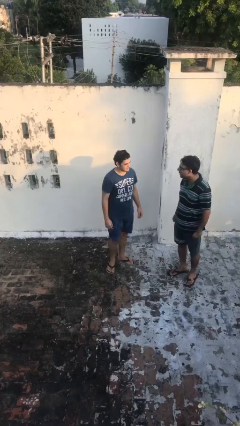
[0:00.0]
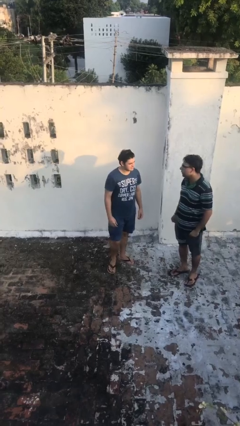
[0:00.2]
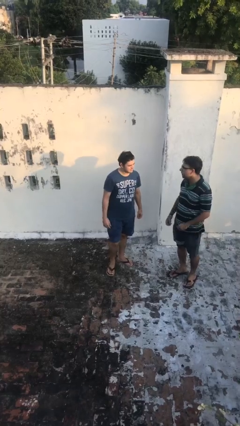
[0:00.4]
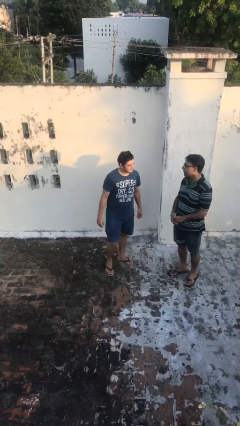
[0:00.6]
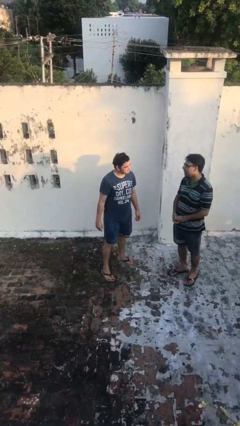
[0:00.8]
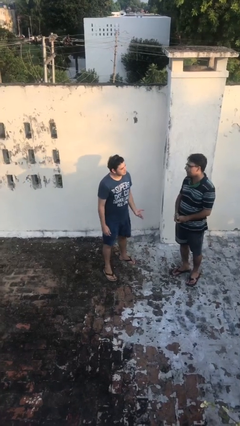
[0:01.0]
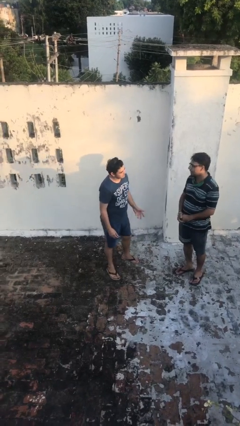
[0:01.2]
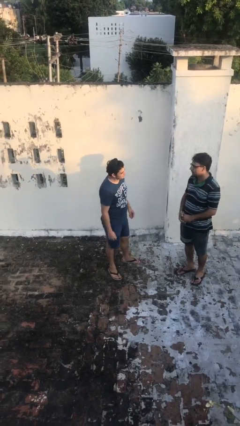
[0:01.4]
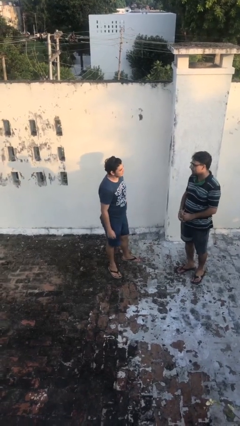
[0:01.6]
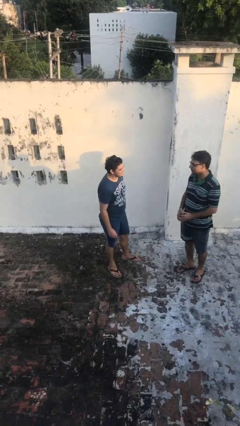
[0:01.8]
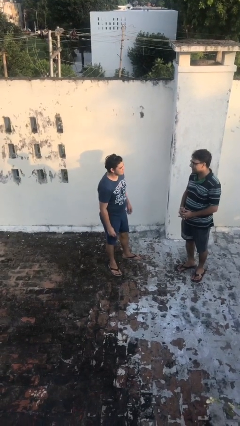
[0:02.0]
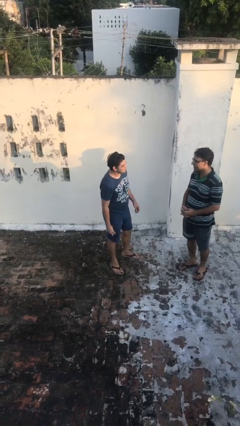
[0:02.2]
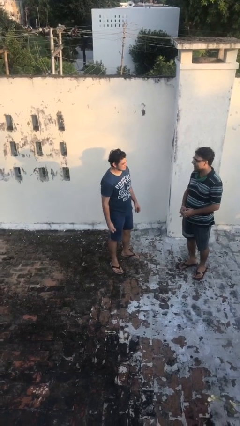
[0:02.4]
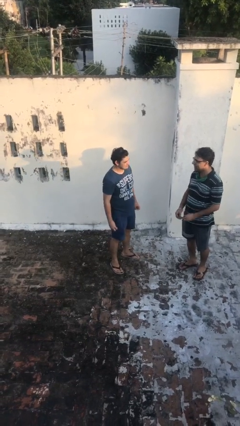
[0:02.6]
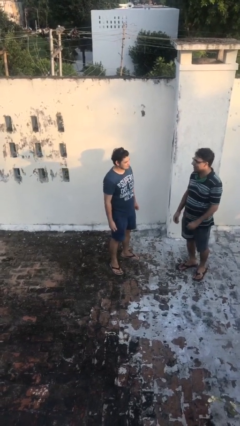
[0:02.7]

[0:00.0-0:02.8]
person talks to person

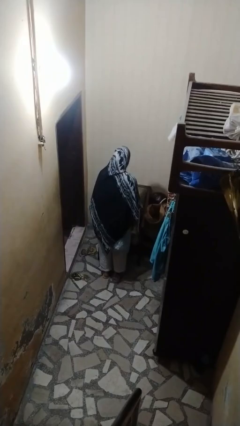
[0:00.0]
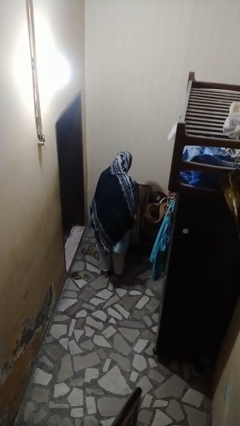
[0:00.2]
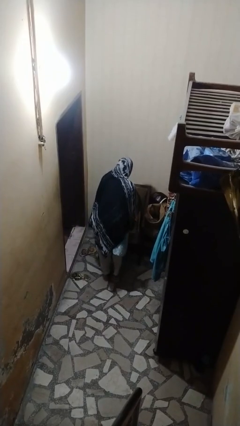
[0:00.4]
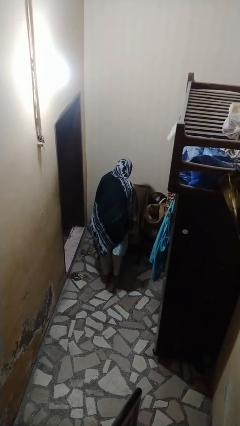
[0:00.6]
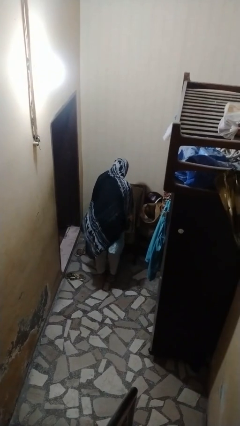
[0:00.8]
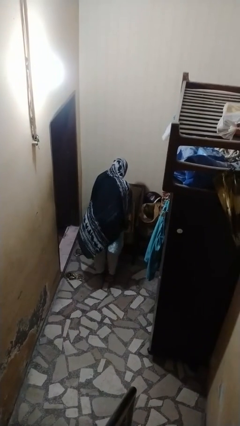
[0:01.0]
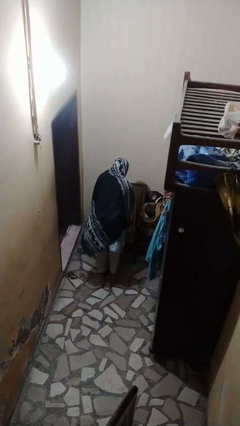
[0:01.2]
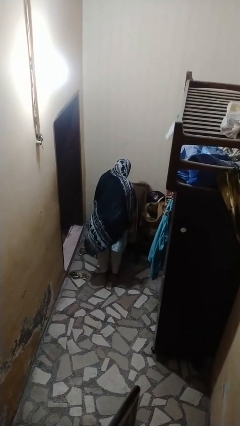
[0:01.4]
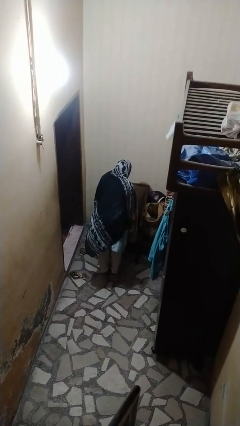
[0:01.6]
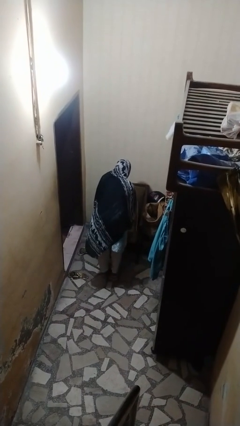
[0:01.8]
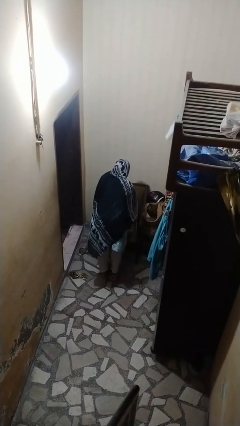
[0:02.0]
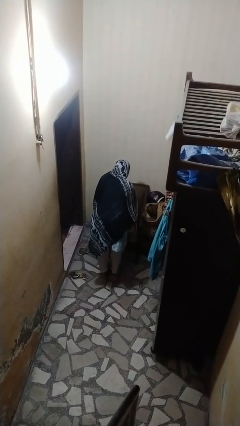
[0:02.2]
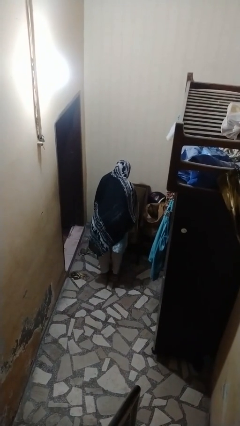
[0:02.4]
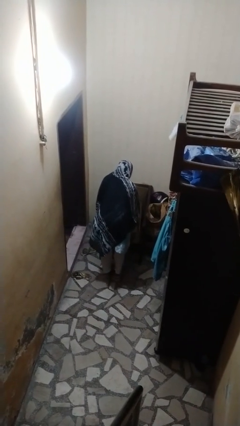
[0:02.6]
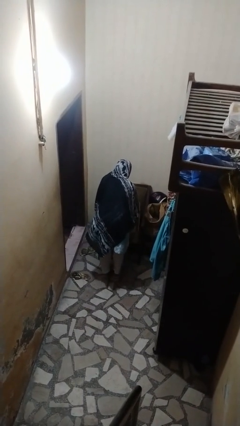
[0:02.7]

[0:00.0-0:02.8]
person searches in box

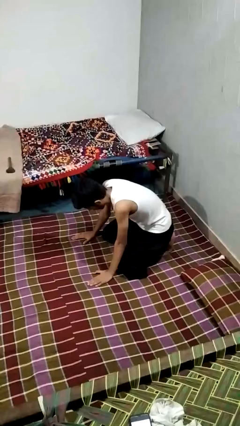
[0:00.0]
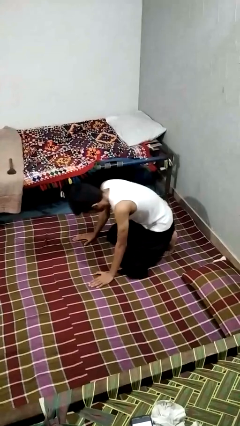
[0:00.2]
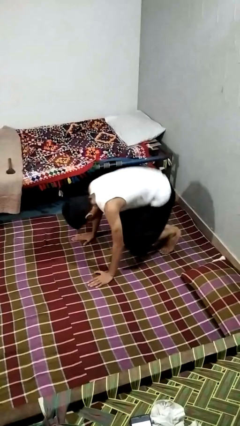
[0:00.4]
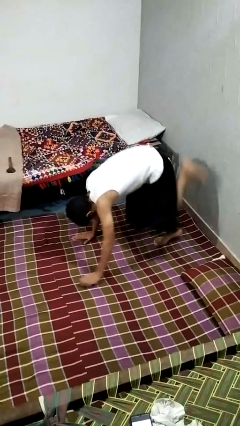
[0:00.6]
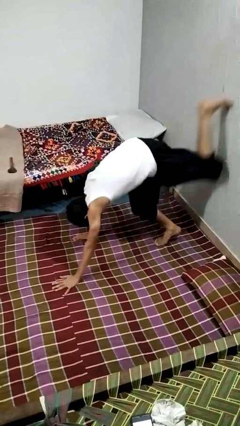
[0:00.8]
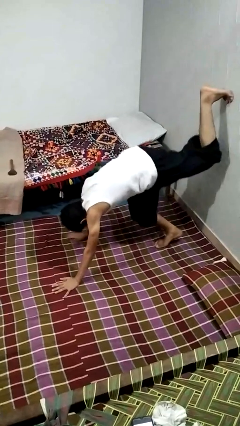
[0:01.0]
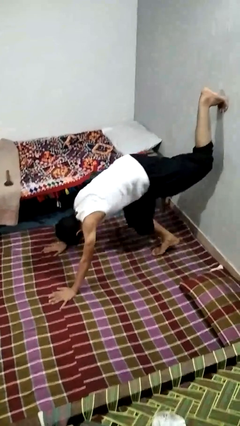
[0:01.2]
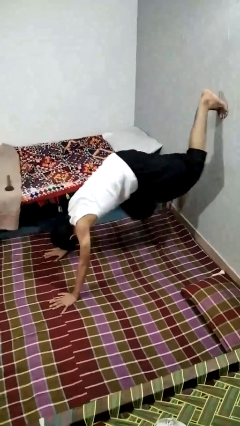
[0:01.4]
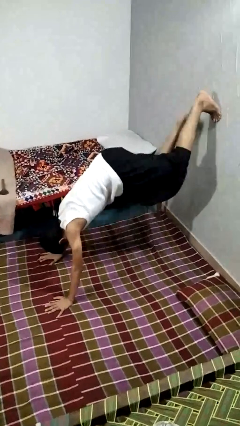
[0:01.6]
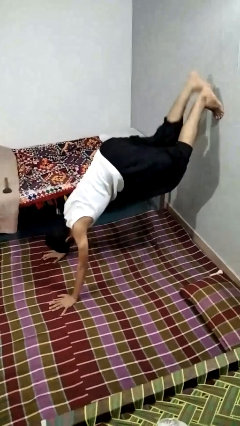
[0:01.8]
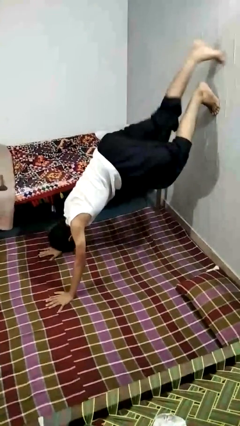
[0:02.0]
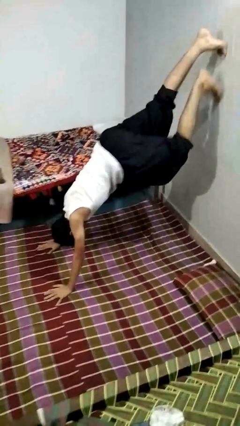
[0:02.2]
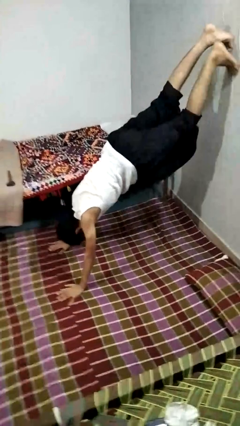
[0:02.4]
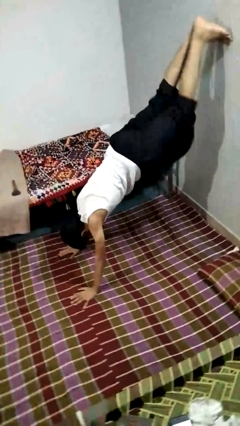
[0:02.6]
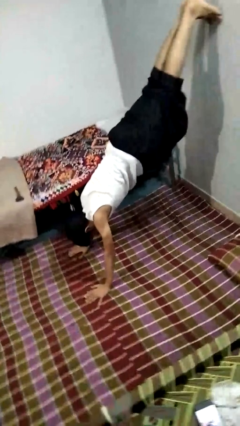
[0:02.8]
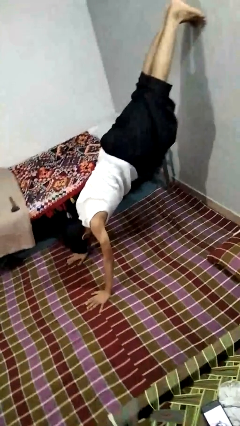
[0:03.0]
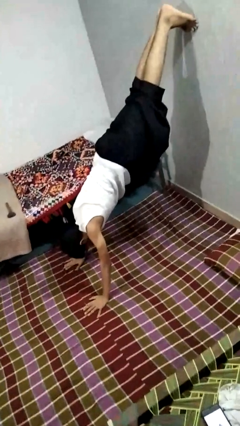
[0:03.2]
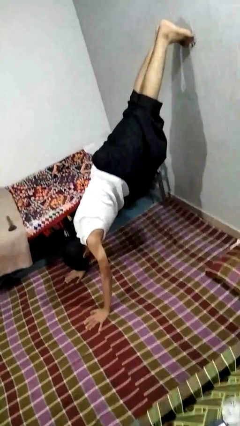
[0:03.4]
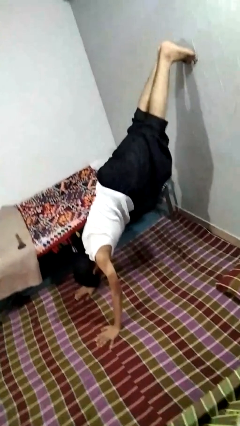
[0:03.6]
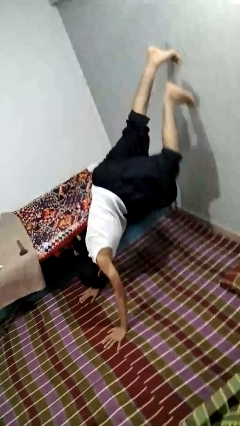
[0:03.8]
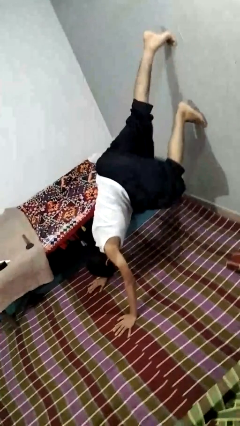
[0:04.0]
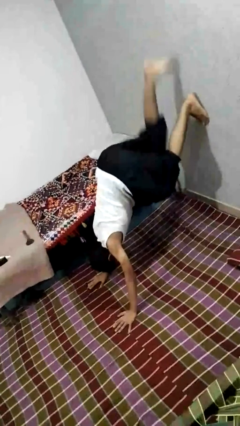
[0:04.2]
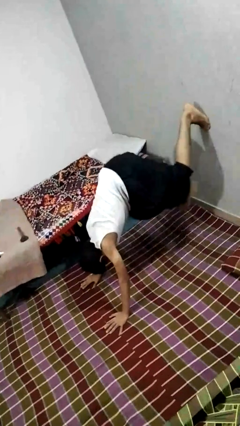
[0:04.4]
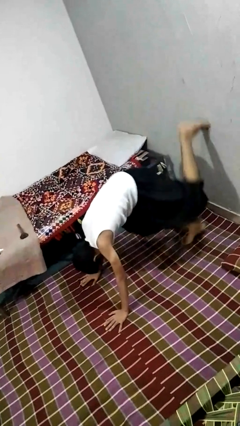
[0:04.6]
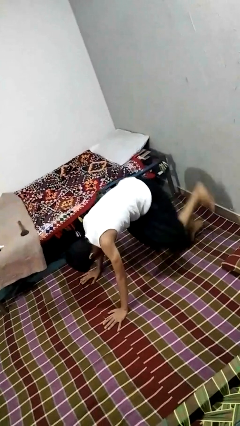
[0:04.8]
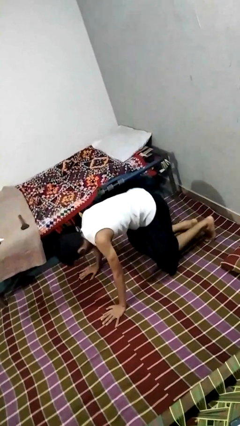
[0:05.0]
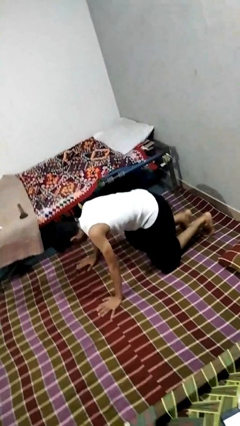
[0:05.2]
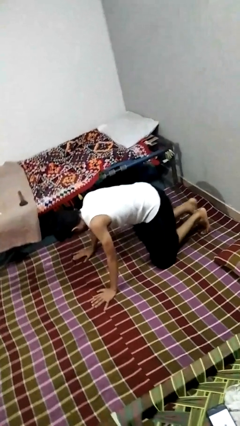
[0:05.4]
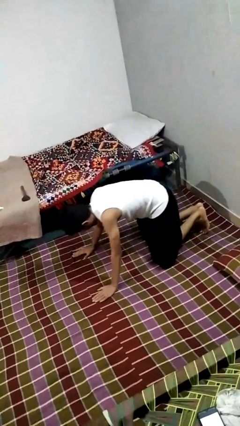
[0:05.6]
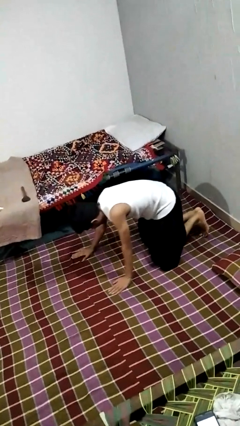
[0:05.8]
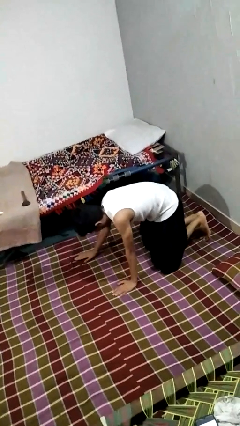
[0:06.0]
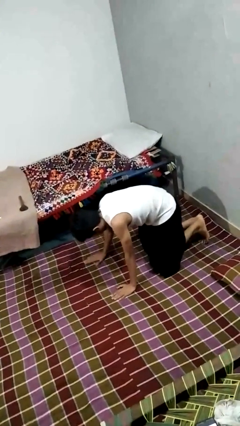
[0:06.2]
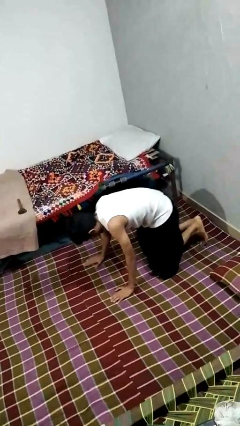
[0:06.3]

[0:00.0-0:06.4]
person handstand

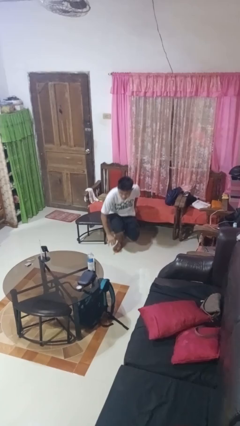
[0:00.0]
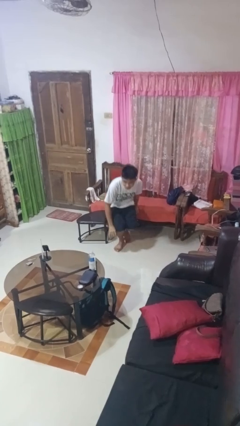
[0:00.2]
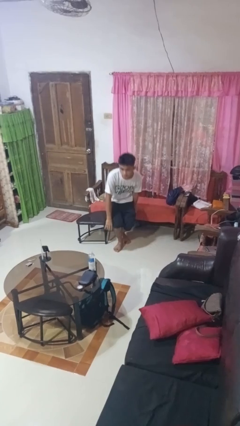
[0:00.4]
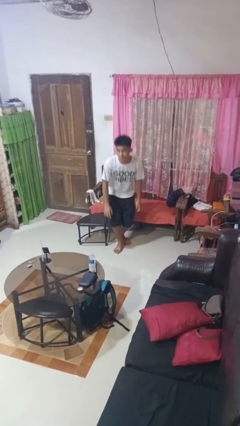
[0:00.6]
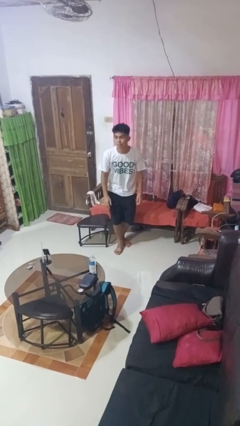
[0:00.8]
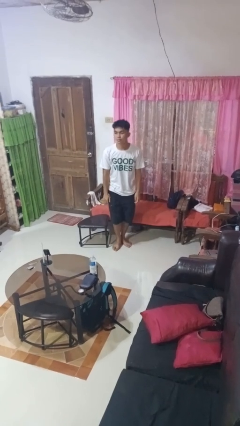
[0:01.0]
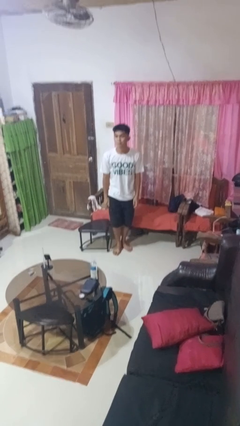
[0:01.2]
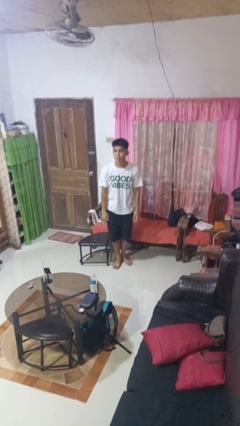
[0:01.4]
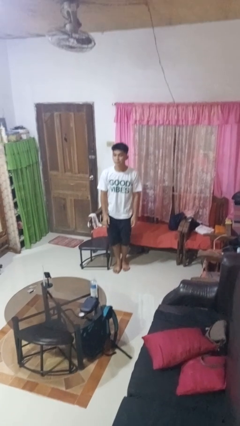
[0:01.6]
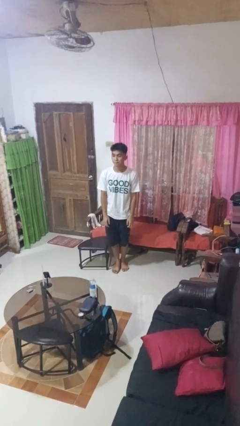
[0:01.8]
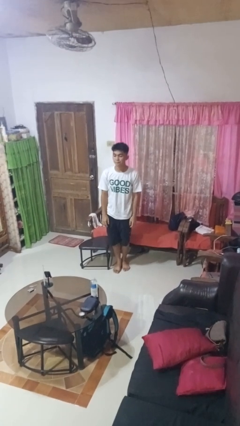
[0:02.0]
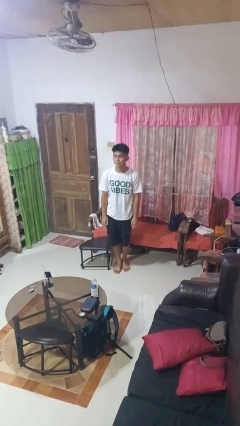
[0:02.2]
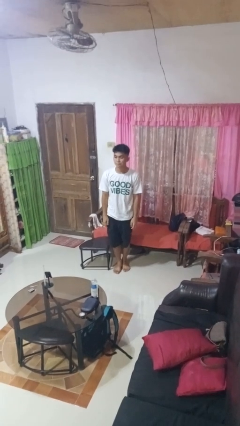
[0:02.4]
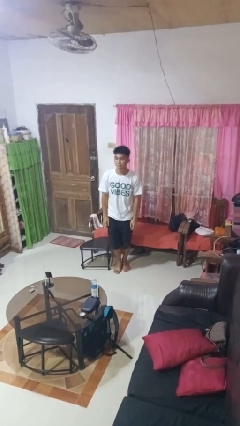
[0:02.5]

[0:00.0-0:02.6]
person stands up from floor

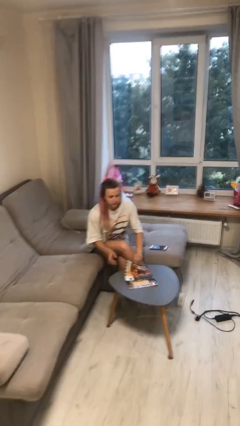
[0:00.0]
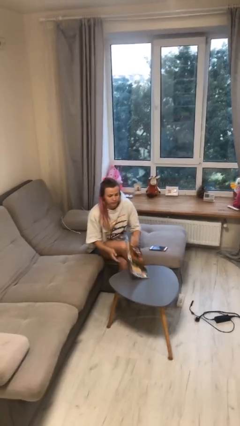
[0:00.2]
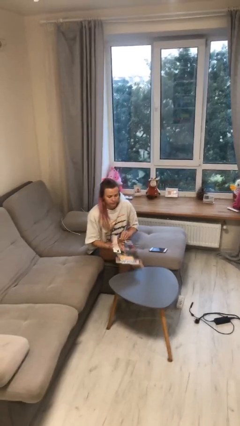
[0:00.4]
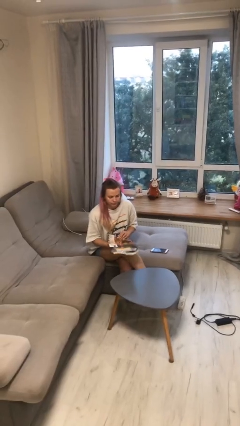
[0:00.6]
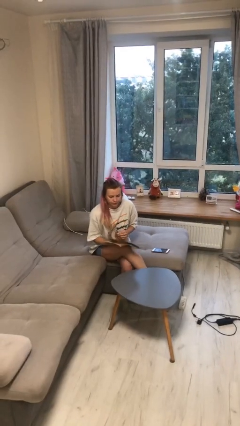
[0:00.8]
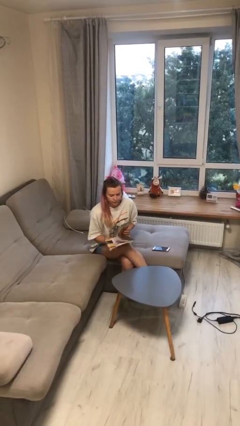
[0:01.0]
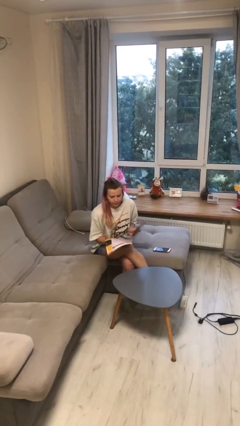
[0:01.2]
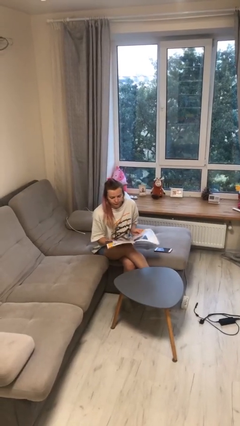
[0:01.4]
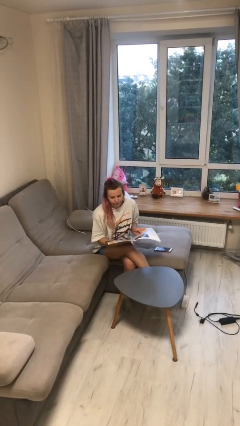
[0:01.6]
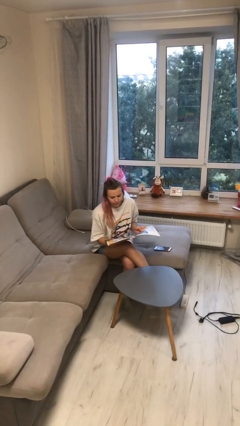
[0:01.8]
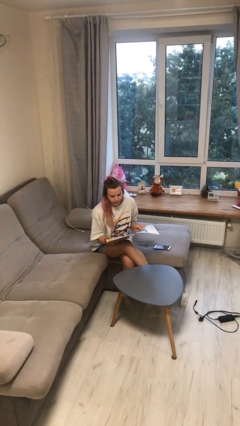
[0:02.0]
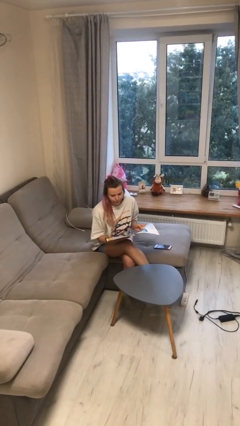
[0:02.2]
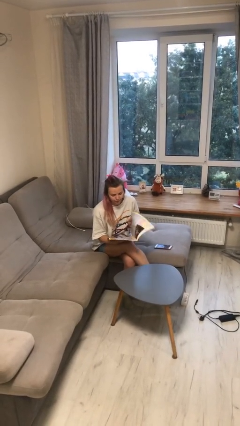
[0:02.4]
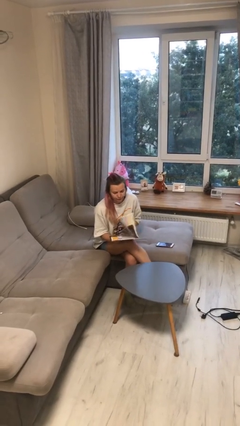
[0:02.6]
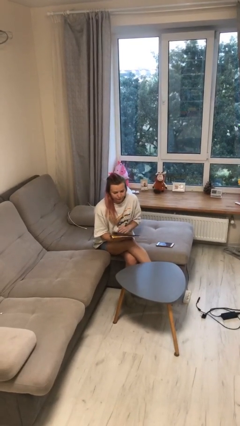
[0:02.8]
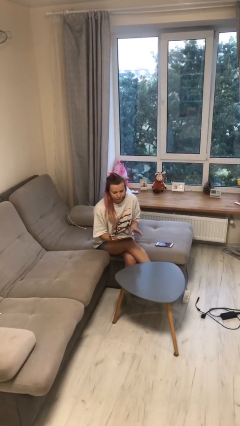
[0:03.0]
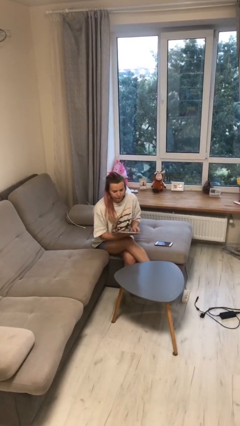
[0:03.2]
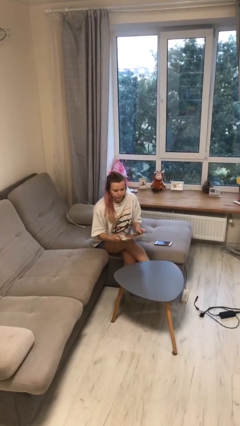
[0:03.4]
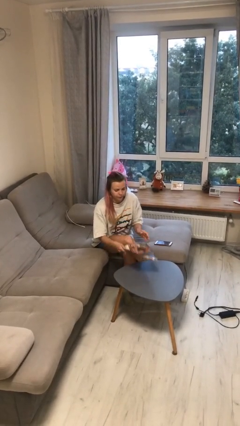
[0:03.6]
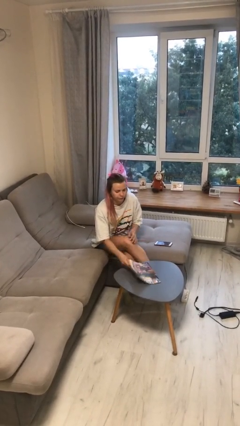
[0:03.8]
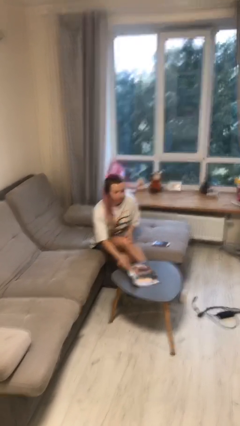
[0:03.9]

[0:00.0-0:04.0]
person reads magazine
